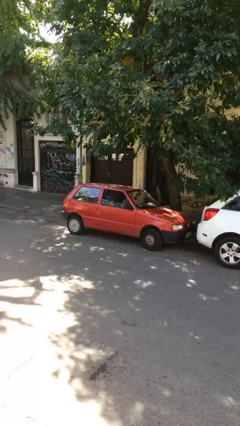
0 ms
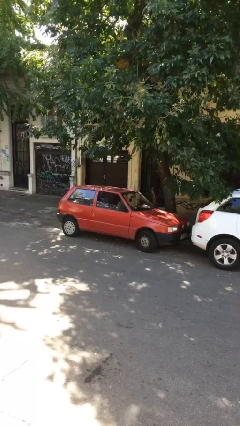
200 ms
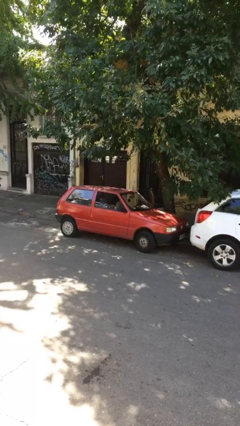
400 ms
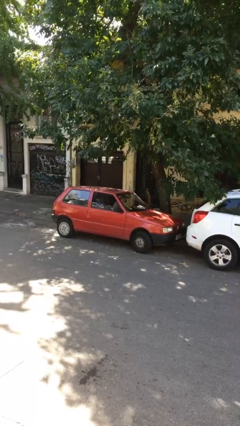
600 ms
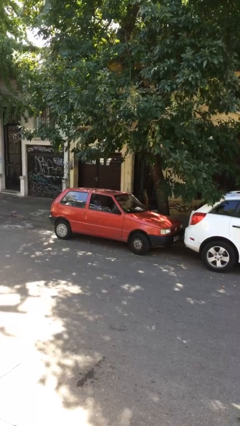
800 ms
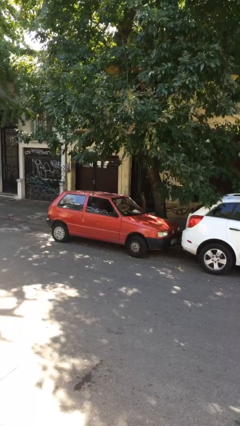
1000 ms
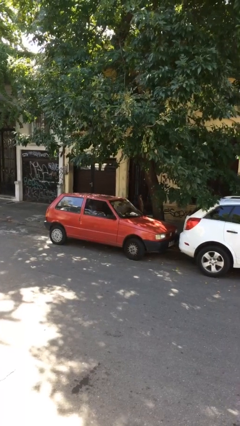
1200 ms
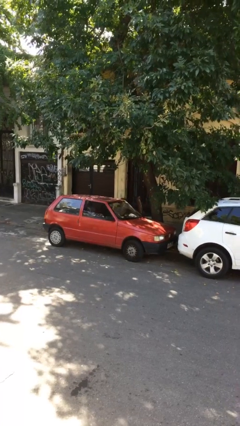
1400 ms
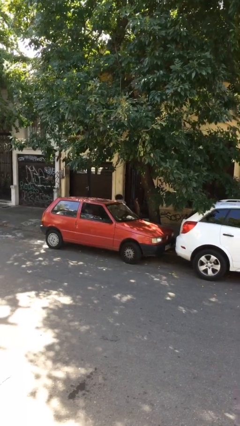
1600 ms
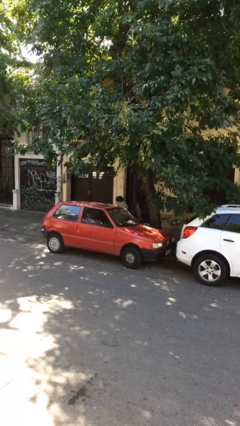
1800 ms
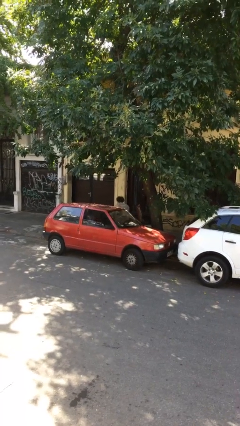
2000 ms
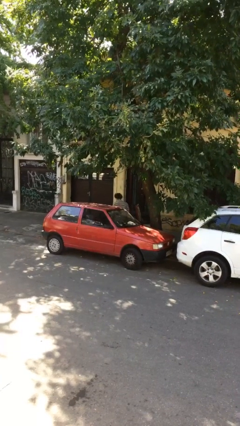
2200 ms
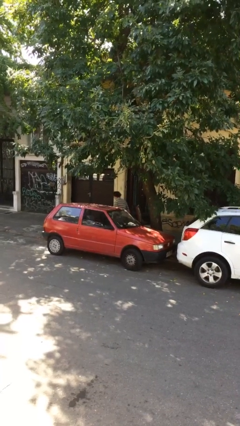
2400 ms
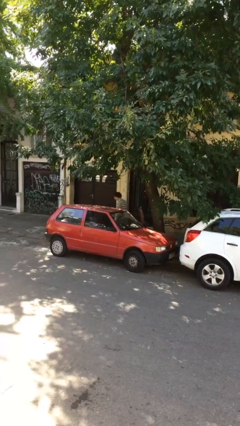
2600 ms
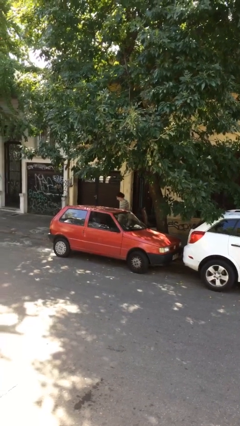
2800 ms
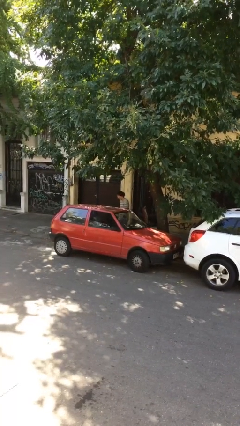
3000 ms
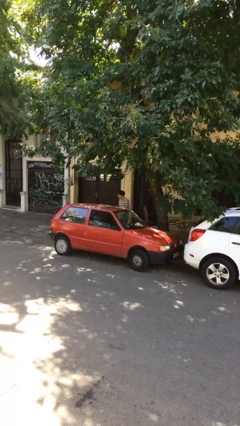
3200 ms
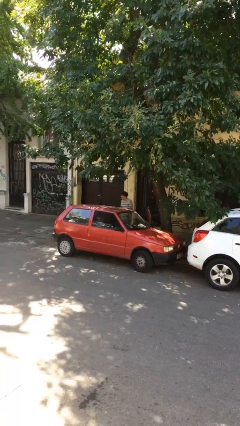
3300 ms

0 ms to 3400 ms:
person exits car

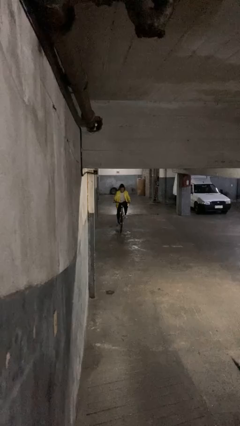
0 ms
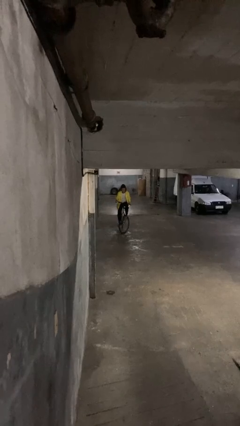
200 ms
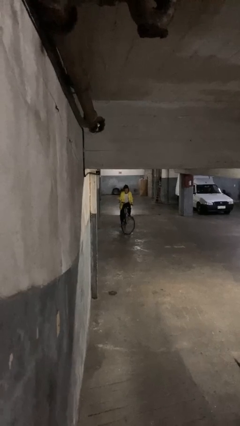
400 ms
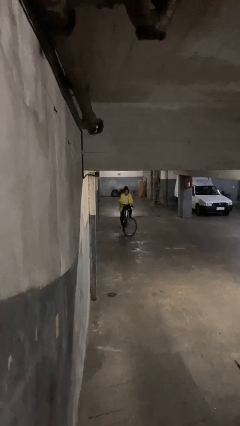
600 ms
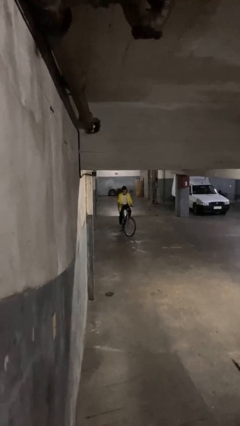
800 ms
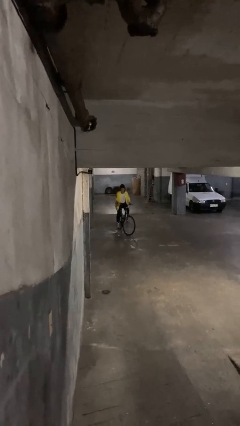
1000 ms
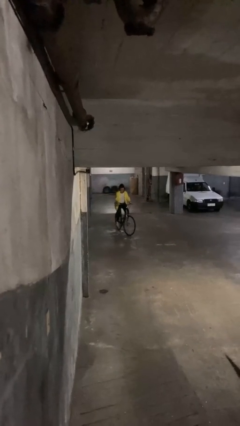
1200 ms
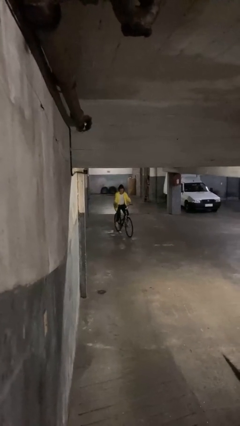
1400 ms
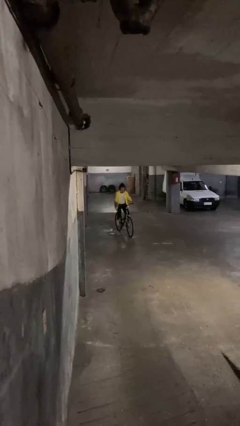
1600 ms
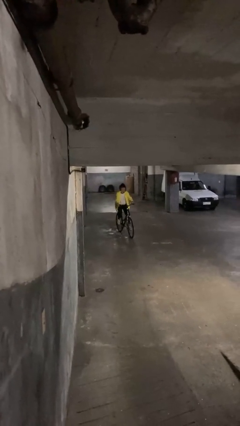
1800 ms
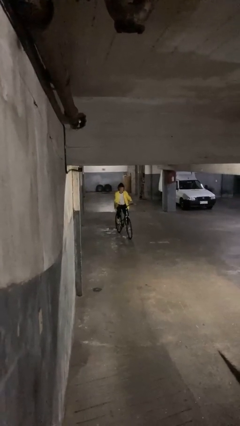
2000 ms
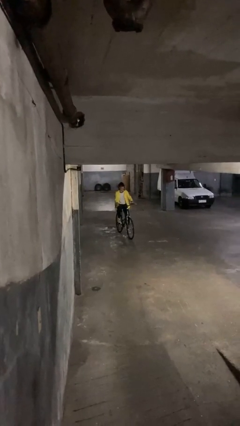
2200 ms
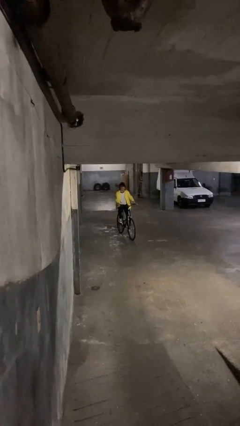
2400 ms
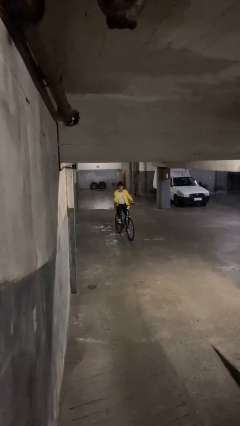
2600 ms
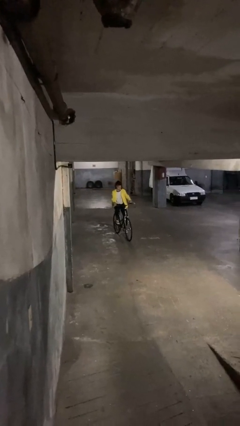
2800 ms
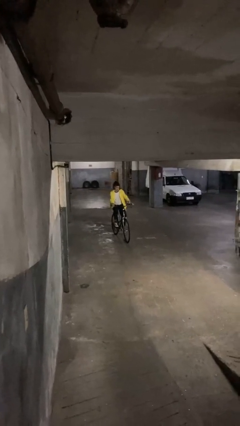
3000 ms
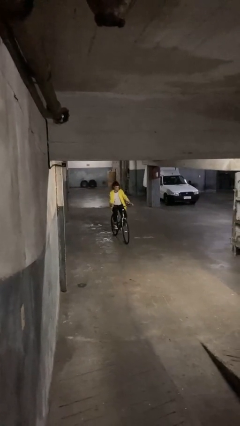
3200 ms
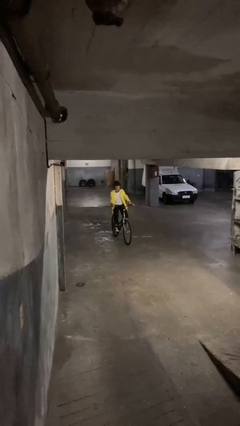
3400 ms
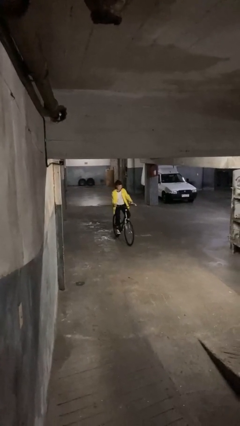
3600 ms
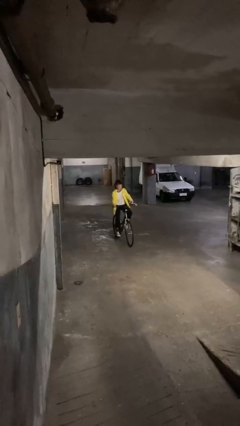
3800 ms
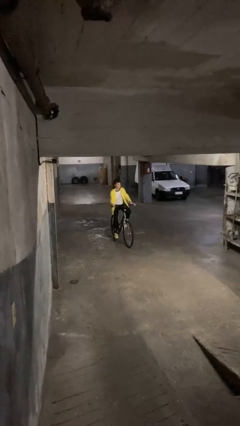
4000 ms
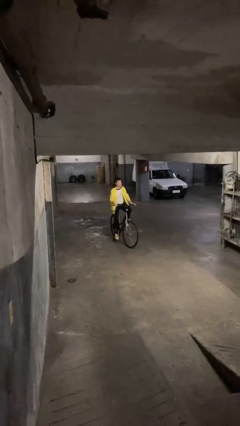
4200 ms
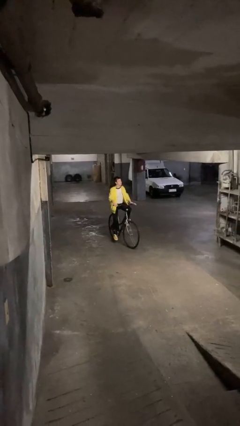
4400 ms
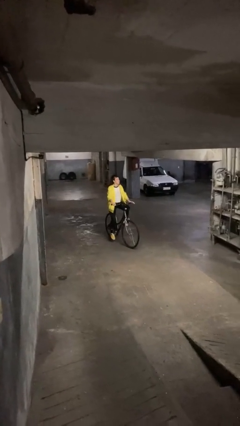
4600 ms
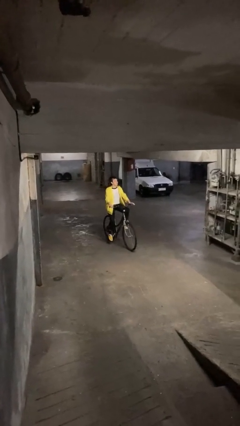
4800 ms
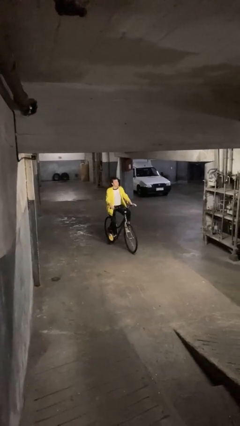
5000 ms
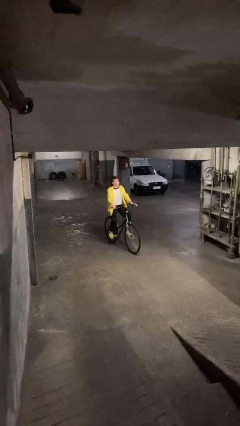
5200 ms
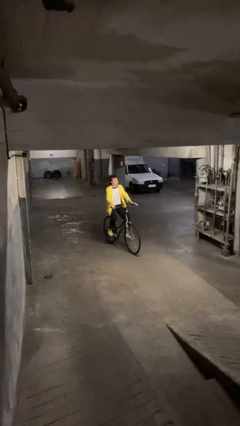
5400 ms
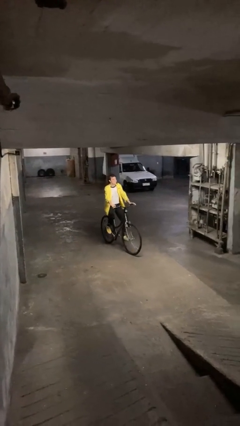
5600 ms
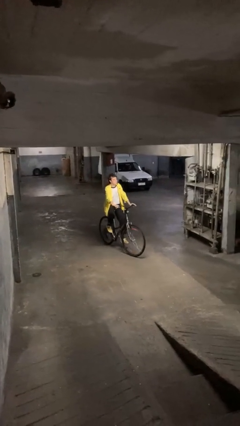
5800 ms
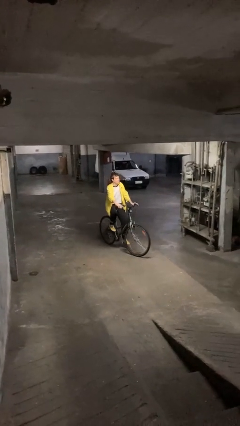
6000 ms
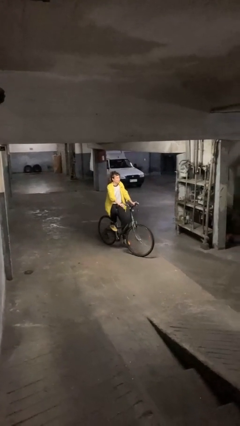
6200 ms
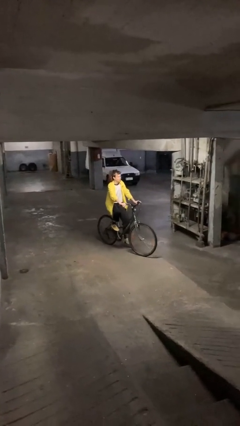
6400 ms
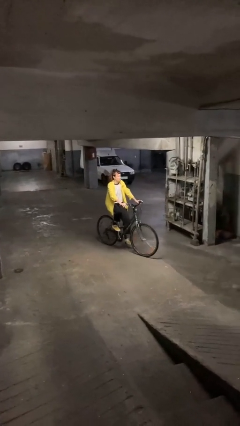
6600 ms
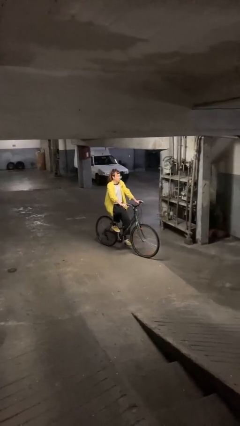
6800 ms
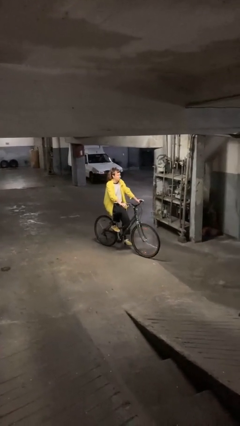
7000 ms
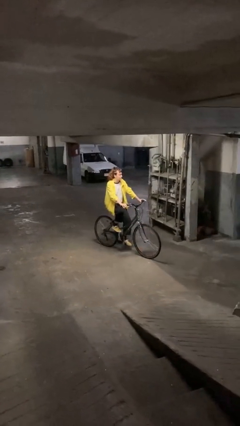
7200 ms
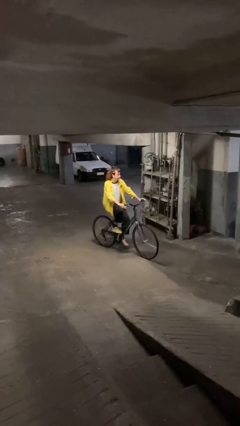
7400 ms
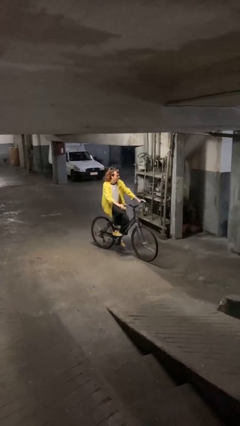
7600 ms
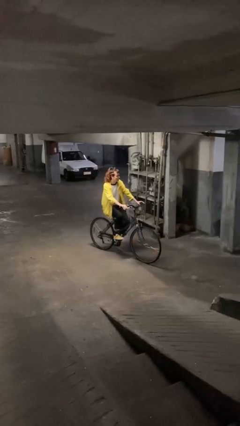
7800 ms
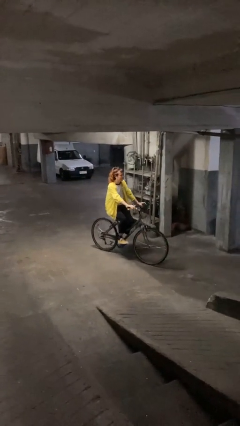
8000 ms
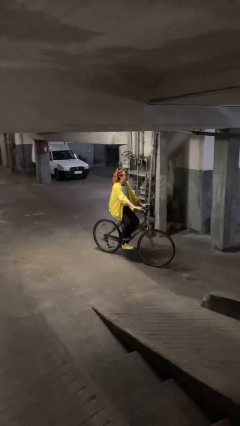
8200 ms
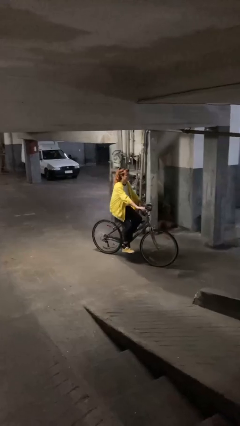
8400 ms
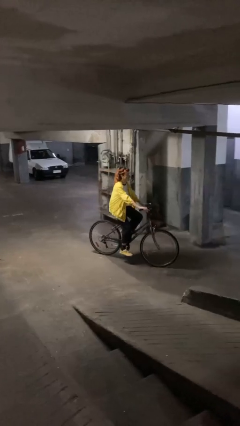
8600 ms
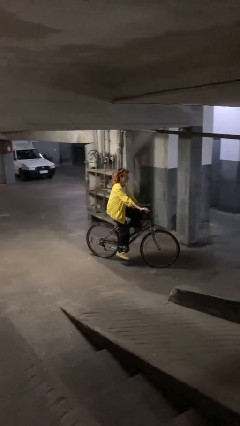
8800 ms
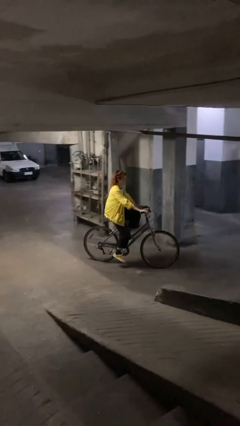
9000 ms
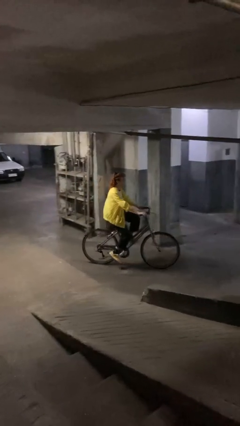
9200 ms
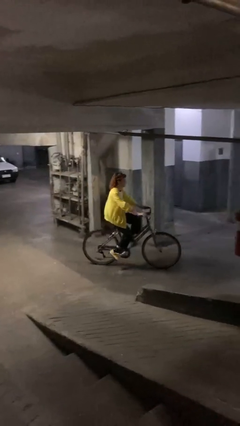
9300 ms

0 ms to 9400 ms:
person rides bicycle

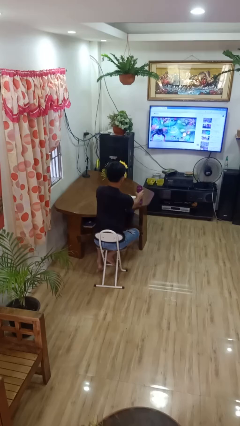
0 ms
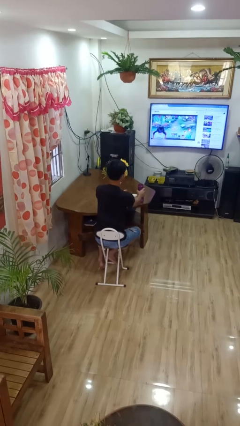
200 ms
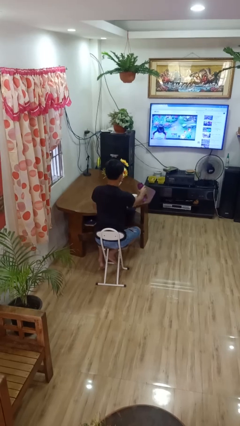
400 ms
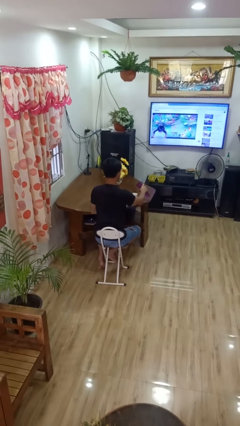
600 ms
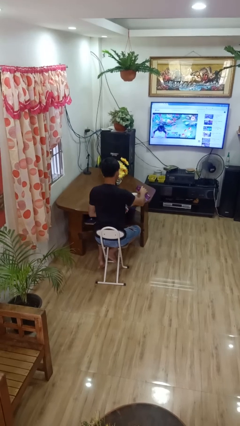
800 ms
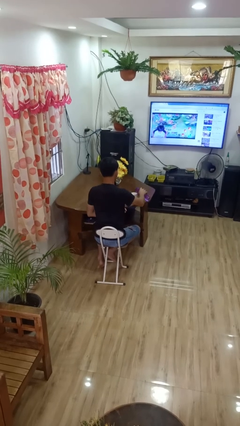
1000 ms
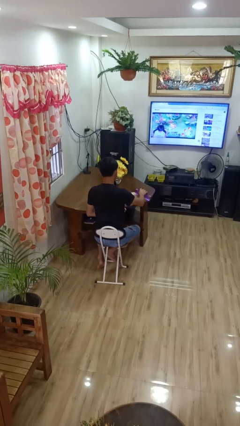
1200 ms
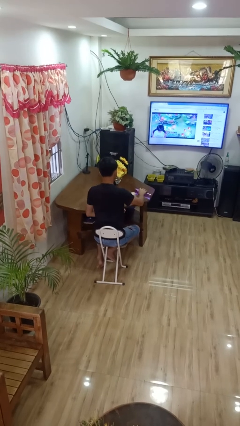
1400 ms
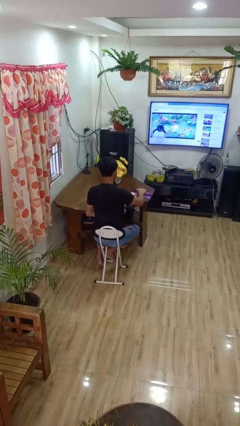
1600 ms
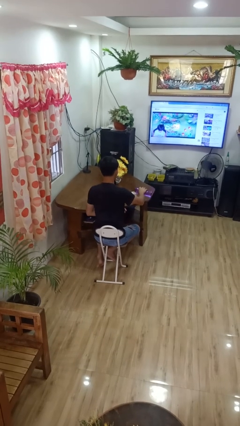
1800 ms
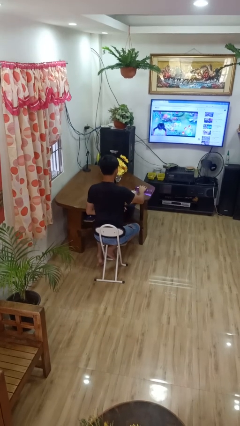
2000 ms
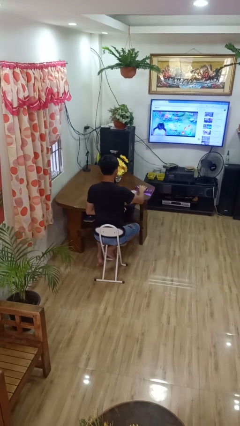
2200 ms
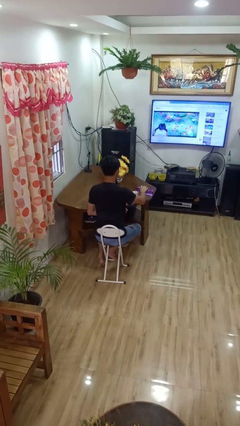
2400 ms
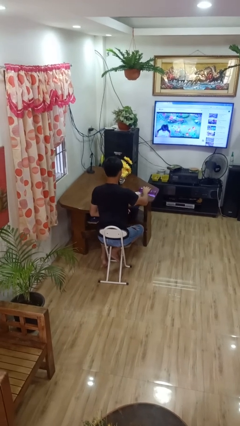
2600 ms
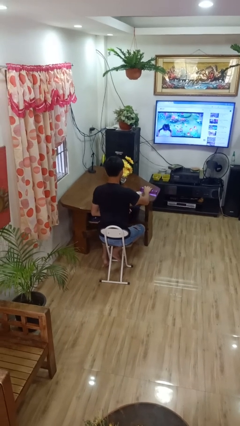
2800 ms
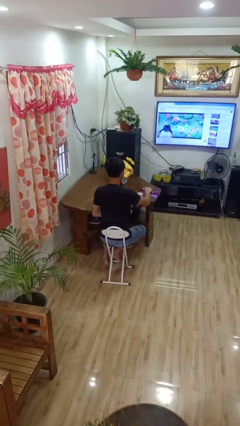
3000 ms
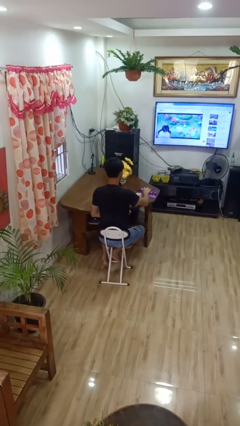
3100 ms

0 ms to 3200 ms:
person pours liquid into cup

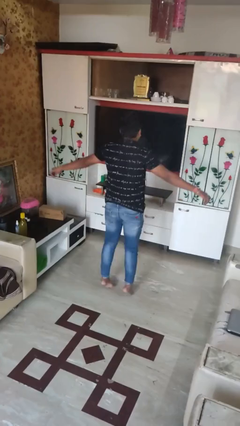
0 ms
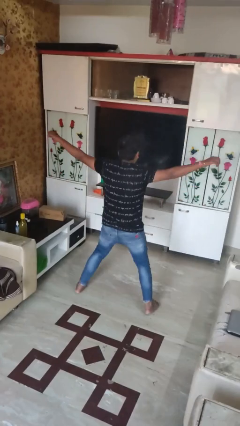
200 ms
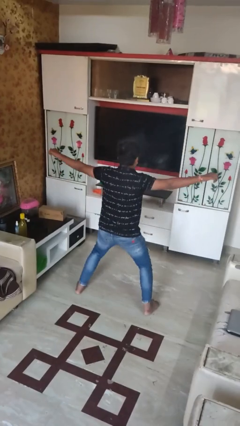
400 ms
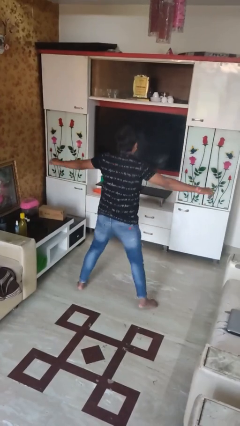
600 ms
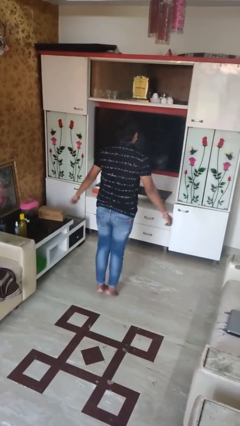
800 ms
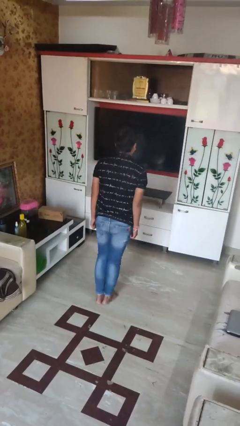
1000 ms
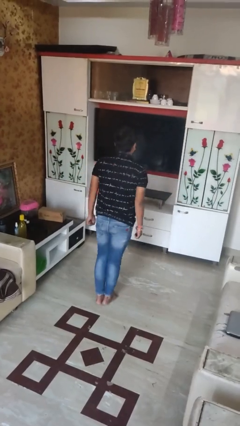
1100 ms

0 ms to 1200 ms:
person exercises with jumping jacks

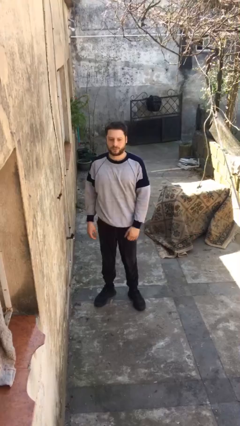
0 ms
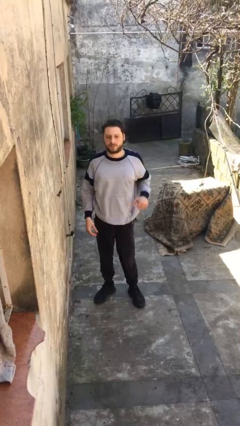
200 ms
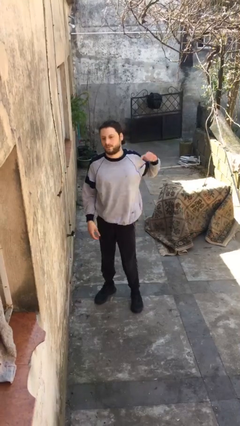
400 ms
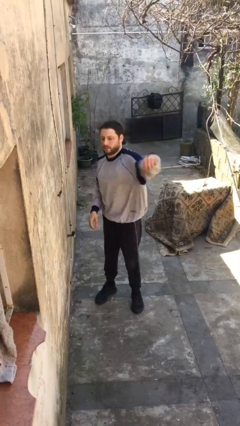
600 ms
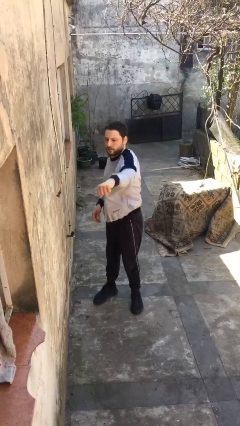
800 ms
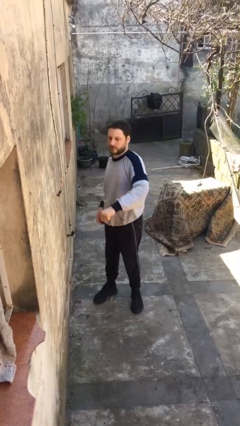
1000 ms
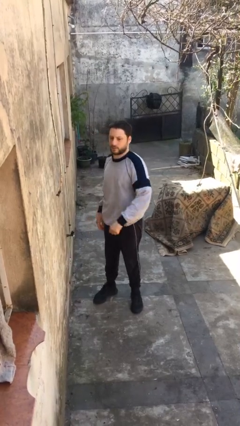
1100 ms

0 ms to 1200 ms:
person punches
